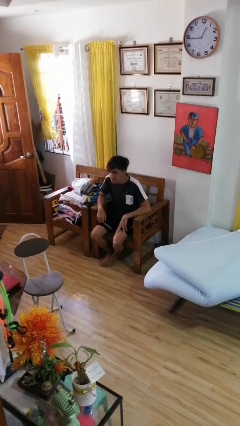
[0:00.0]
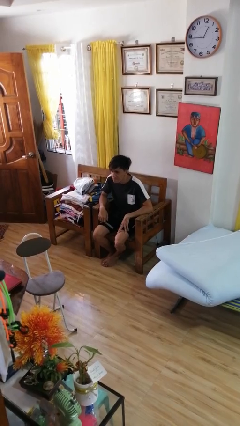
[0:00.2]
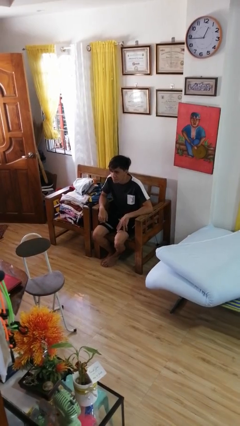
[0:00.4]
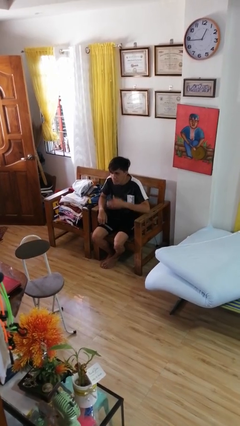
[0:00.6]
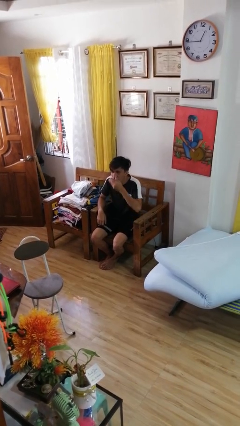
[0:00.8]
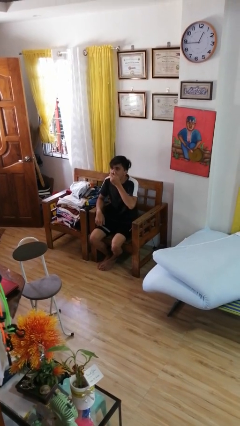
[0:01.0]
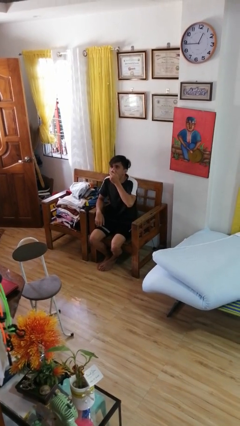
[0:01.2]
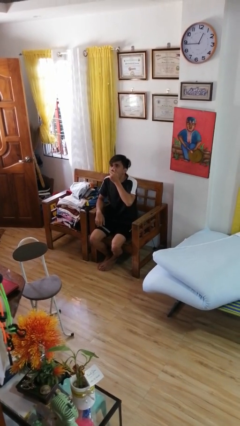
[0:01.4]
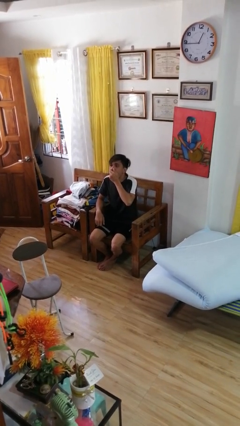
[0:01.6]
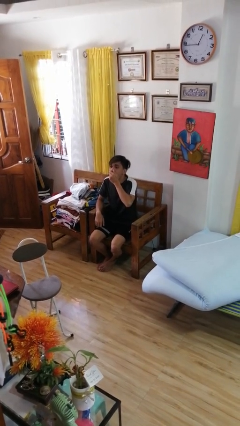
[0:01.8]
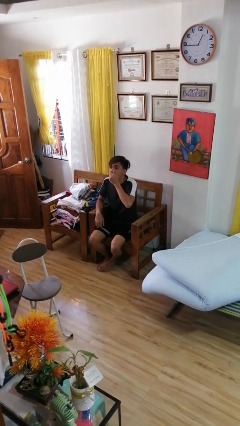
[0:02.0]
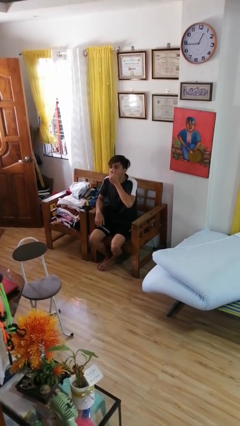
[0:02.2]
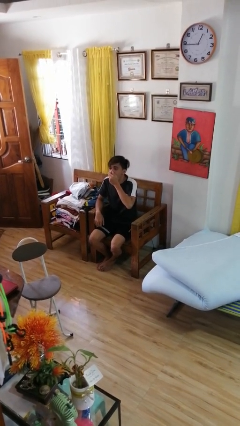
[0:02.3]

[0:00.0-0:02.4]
person yawns

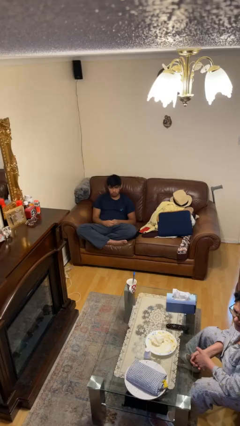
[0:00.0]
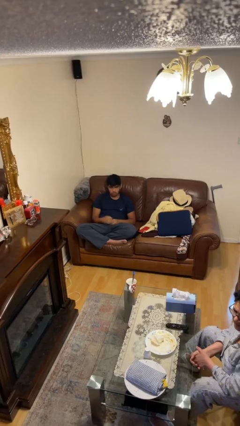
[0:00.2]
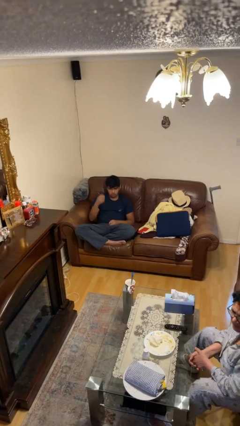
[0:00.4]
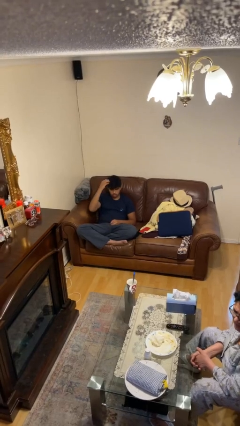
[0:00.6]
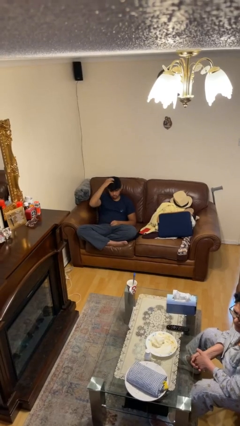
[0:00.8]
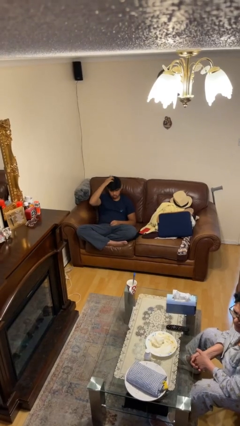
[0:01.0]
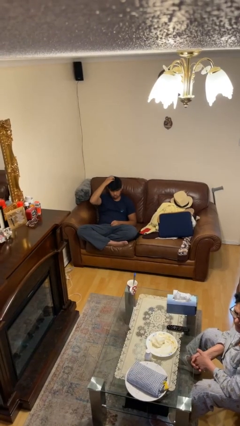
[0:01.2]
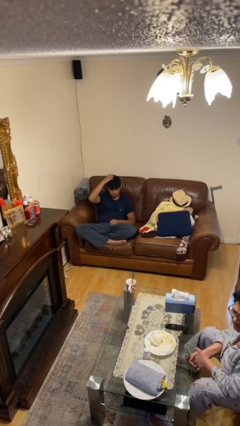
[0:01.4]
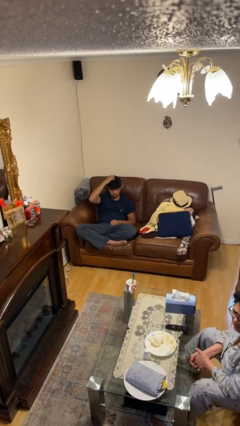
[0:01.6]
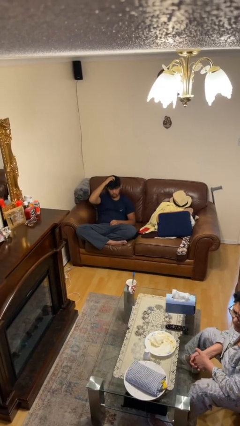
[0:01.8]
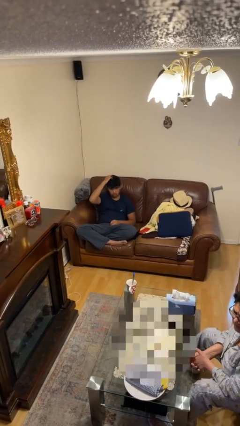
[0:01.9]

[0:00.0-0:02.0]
person strokes hair

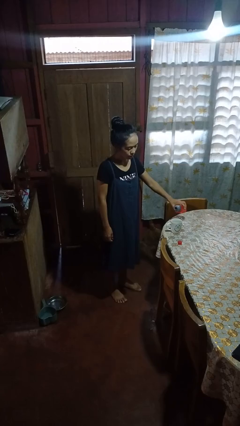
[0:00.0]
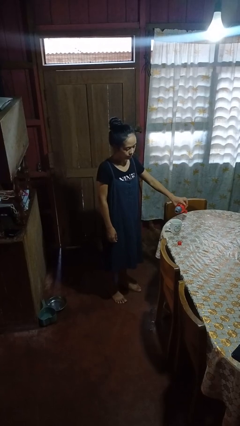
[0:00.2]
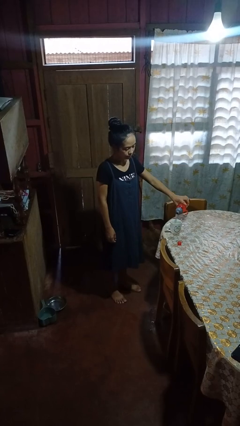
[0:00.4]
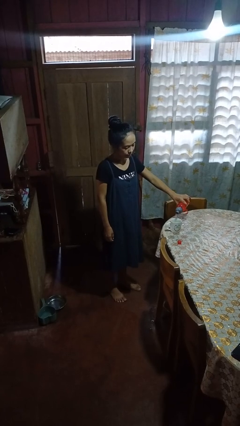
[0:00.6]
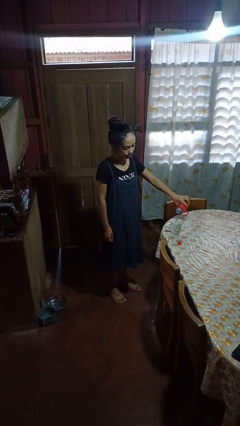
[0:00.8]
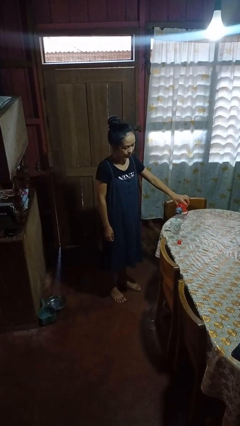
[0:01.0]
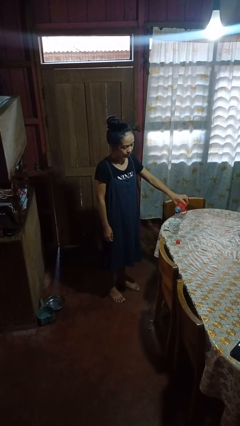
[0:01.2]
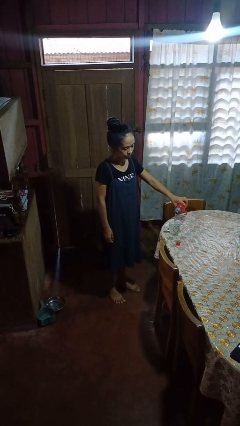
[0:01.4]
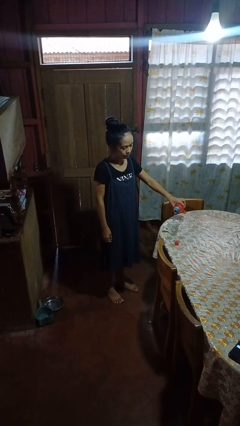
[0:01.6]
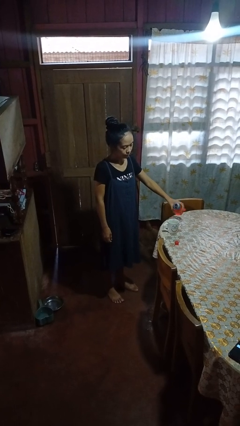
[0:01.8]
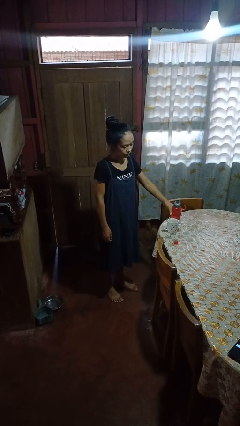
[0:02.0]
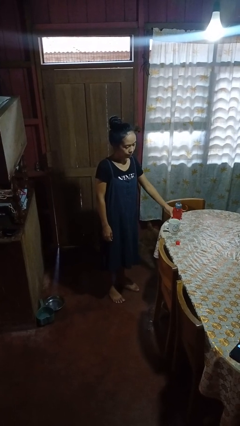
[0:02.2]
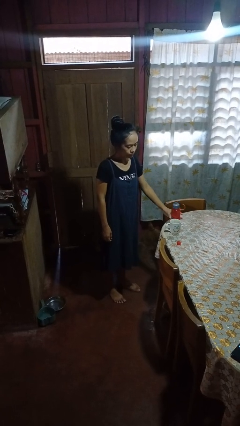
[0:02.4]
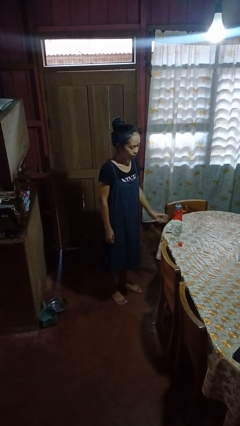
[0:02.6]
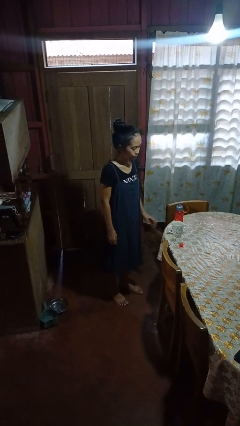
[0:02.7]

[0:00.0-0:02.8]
person pours liquid into cup

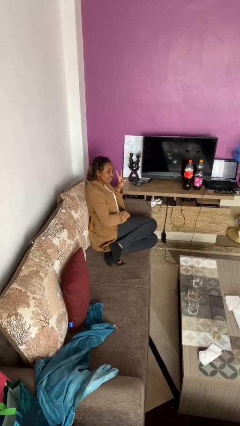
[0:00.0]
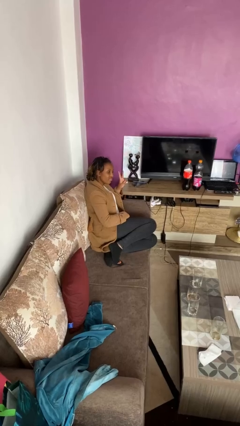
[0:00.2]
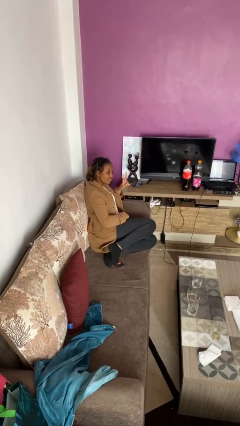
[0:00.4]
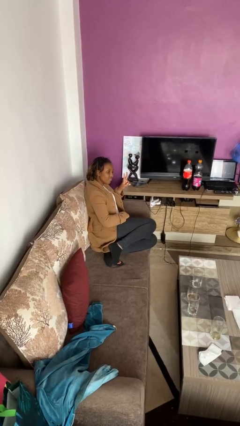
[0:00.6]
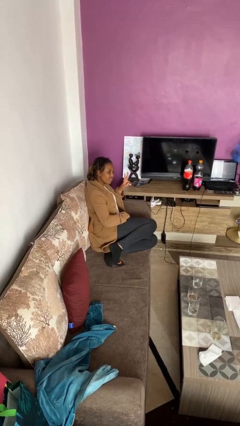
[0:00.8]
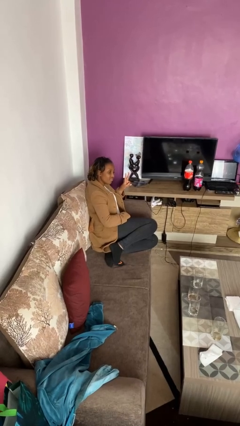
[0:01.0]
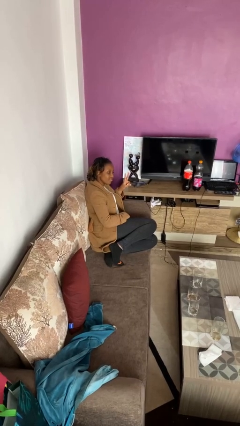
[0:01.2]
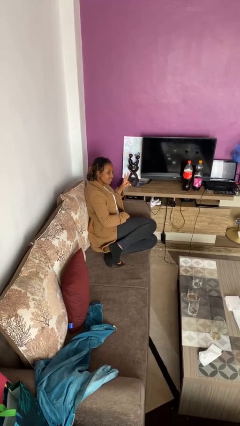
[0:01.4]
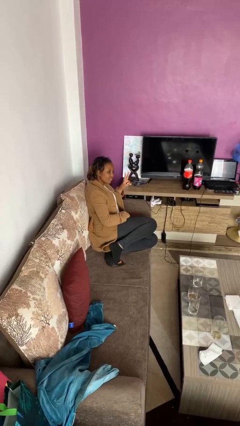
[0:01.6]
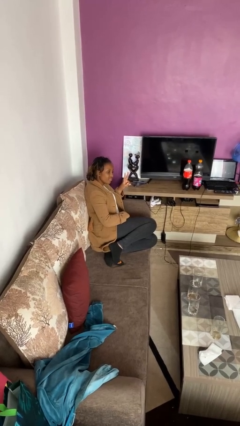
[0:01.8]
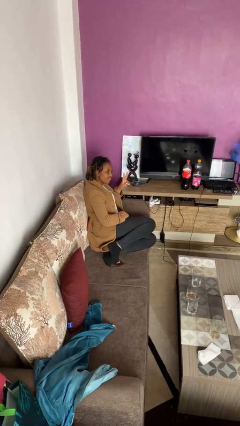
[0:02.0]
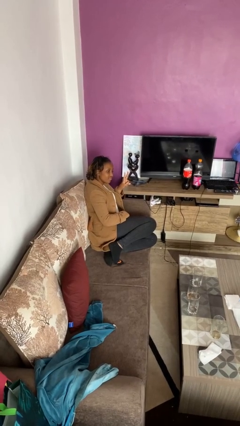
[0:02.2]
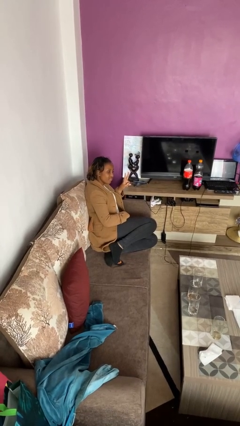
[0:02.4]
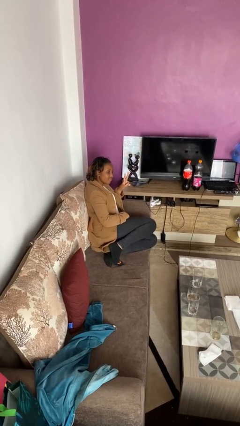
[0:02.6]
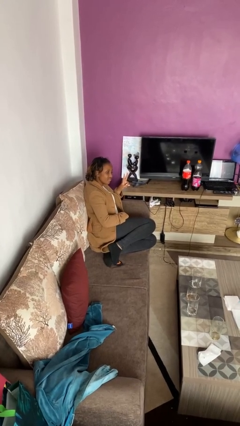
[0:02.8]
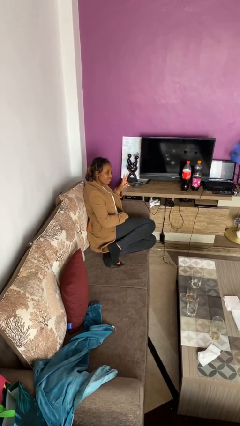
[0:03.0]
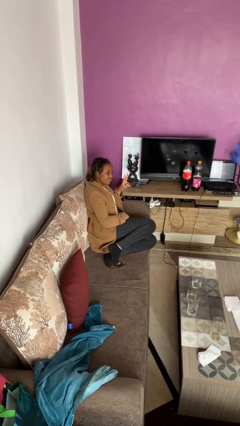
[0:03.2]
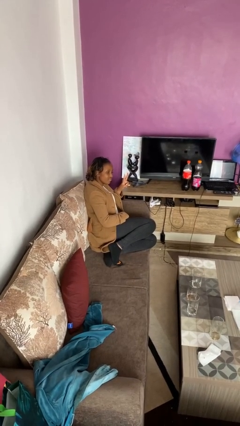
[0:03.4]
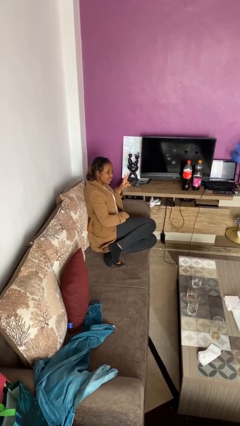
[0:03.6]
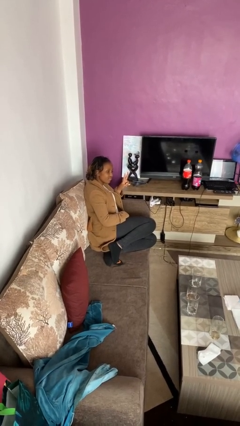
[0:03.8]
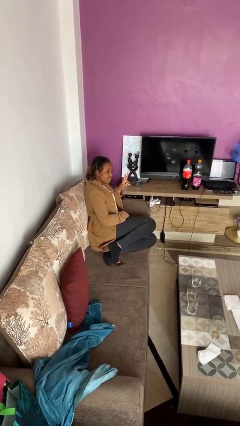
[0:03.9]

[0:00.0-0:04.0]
person gestures peace

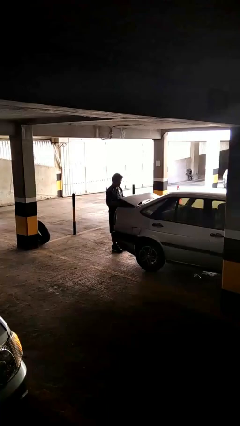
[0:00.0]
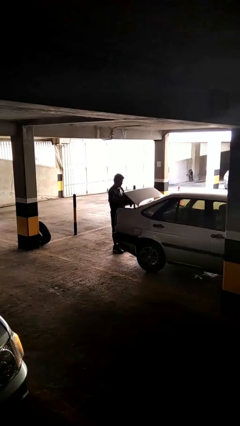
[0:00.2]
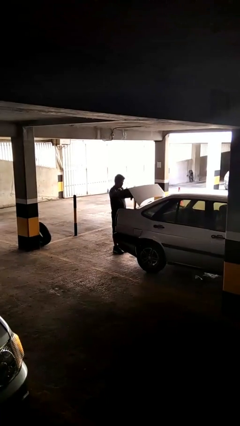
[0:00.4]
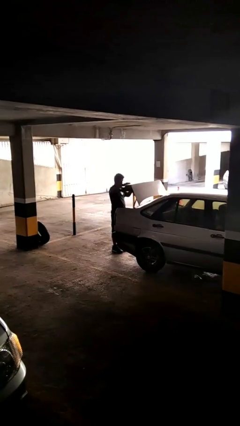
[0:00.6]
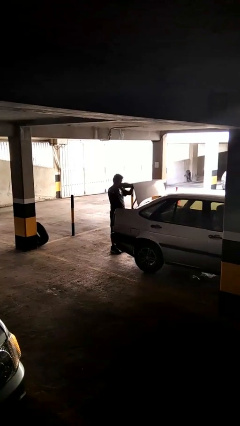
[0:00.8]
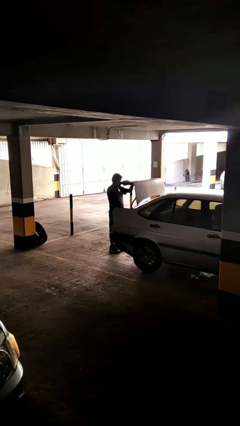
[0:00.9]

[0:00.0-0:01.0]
person opens car trunk

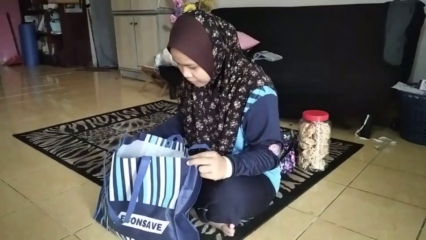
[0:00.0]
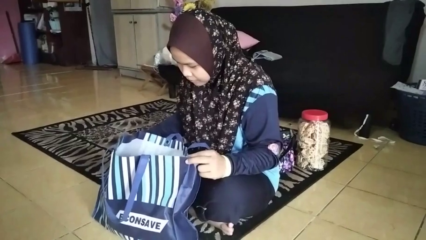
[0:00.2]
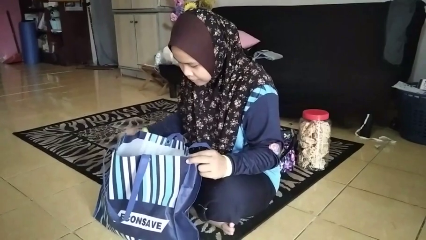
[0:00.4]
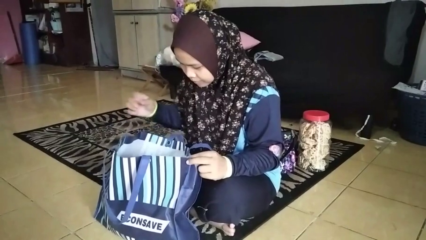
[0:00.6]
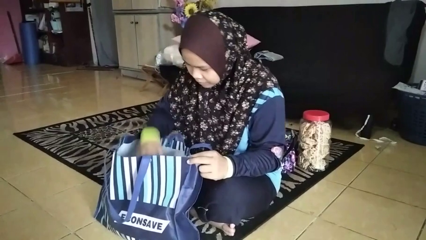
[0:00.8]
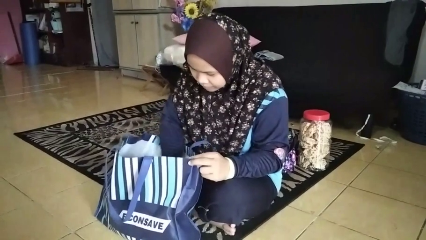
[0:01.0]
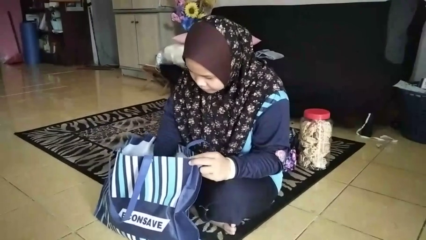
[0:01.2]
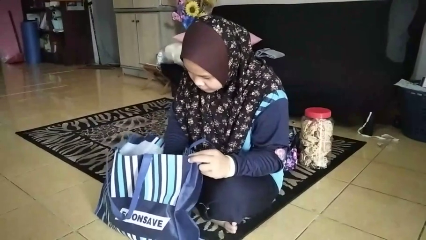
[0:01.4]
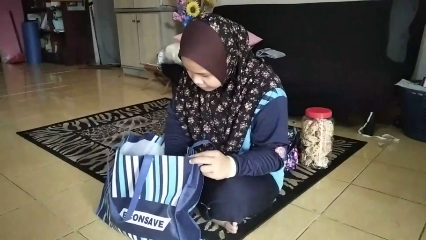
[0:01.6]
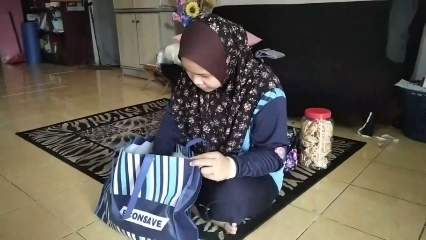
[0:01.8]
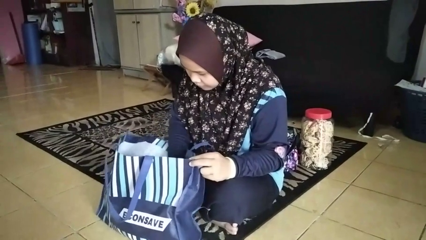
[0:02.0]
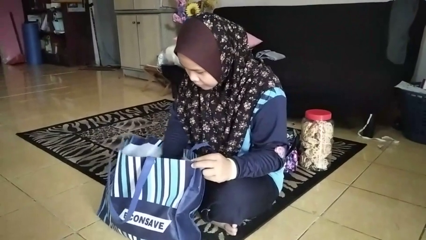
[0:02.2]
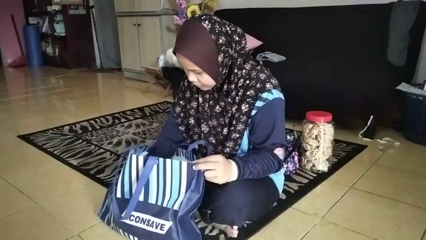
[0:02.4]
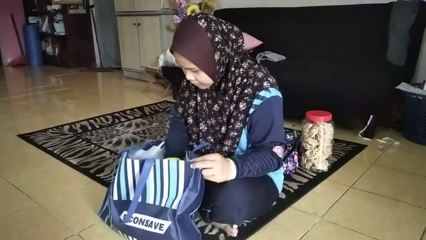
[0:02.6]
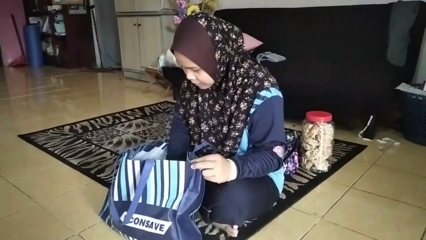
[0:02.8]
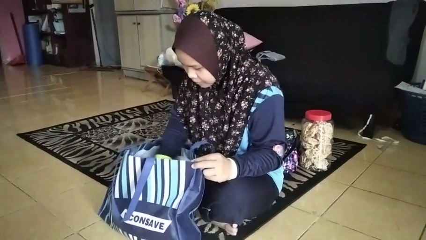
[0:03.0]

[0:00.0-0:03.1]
person searches in bag

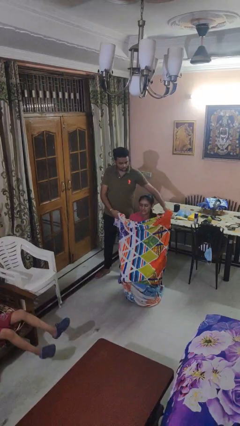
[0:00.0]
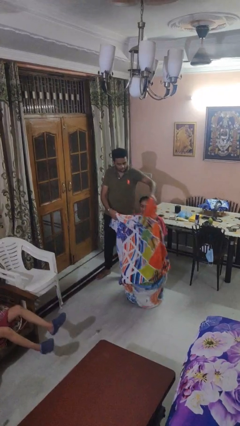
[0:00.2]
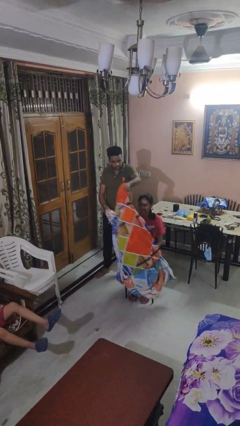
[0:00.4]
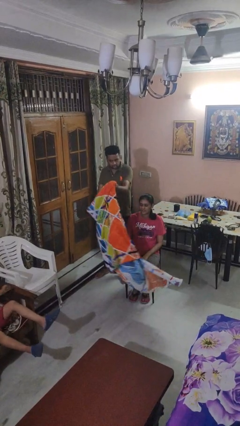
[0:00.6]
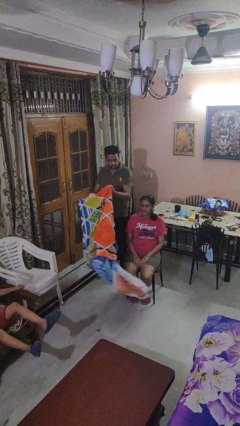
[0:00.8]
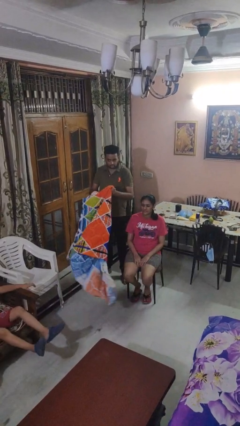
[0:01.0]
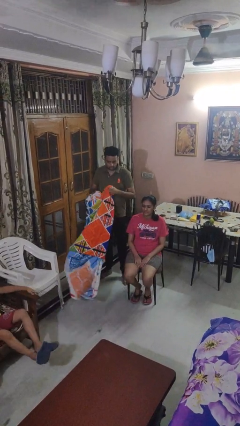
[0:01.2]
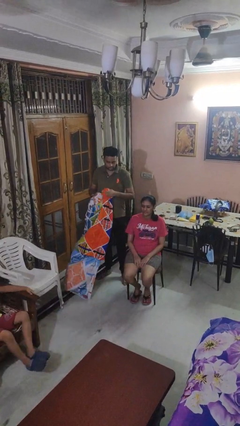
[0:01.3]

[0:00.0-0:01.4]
person uncovers friend with blanket

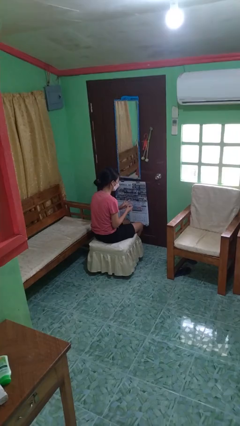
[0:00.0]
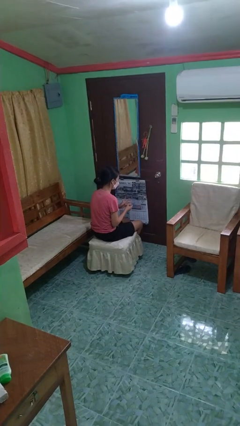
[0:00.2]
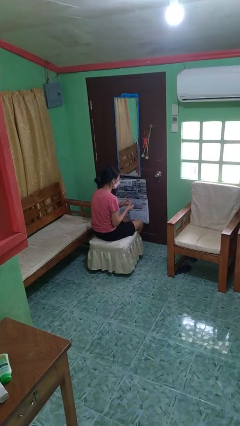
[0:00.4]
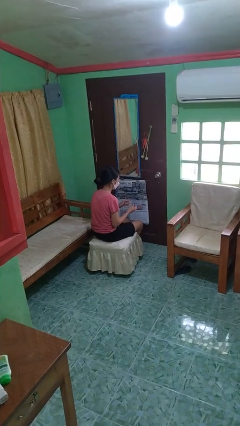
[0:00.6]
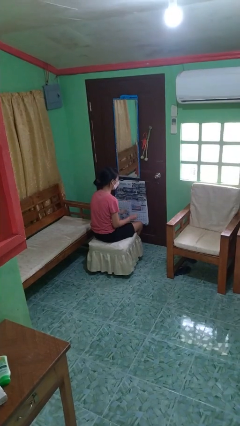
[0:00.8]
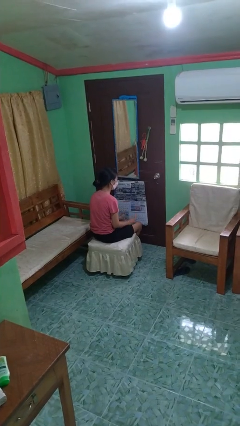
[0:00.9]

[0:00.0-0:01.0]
person takes off ring
